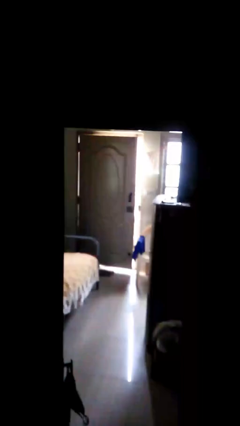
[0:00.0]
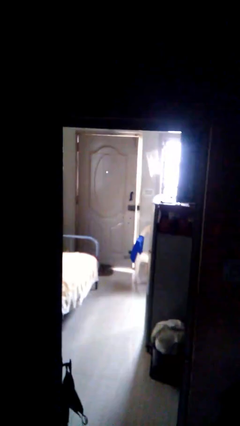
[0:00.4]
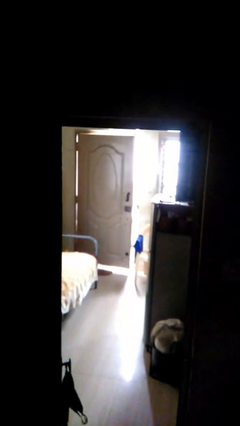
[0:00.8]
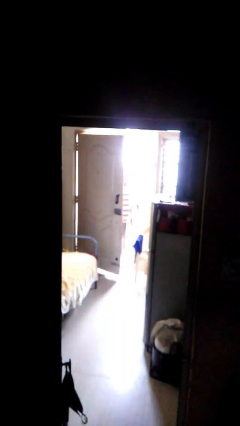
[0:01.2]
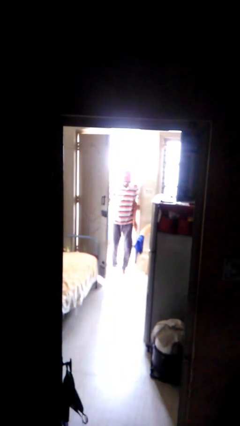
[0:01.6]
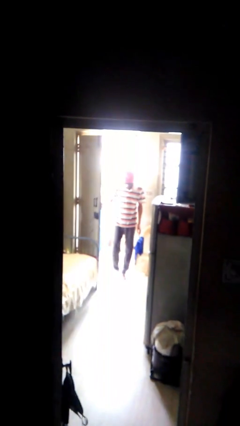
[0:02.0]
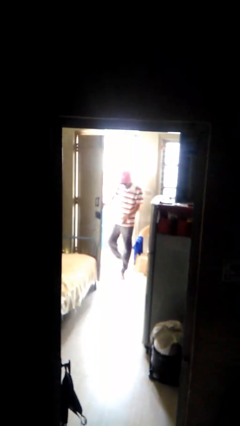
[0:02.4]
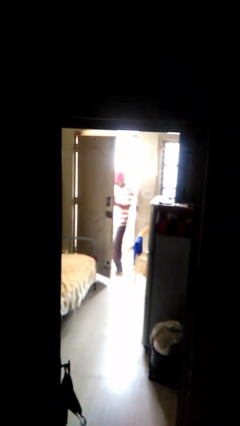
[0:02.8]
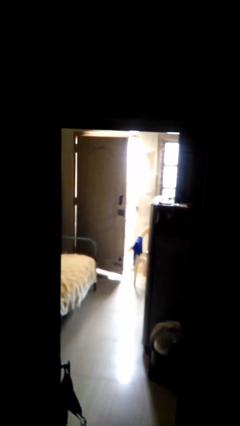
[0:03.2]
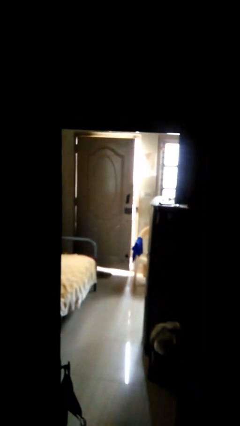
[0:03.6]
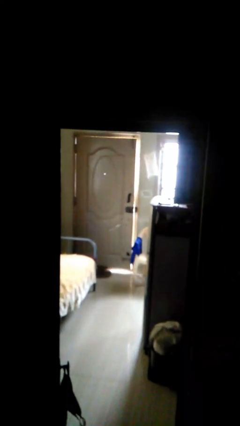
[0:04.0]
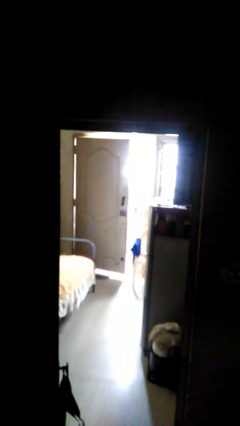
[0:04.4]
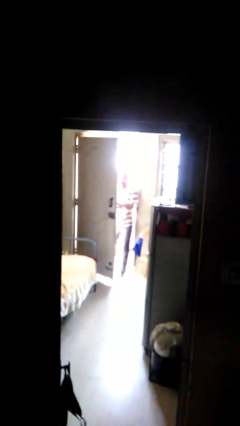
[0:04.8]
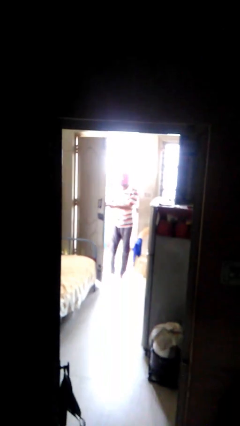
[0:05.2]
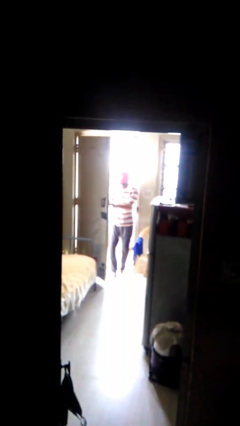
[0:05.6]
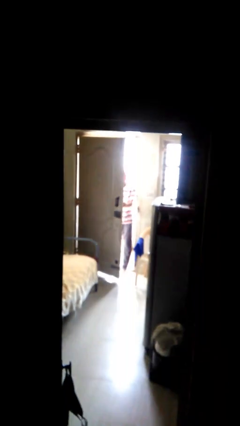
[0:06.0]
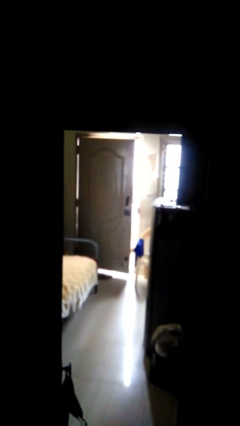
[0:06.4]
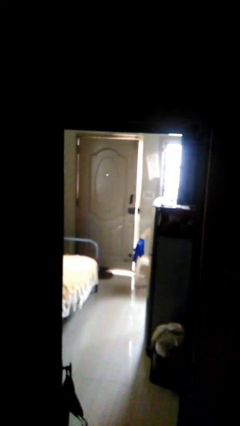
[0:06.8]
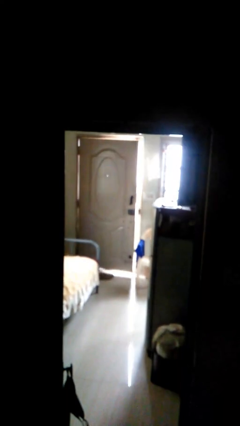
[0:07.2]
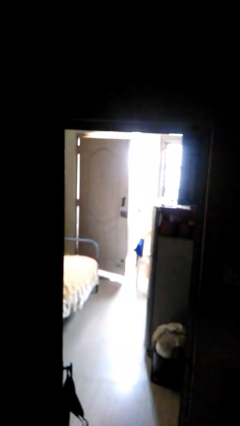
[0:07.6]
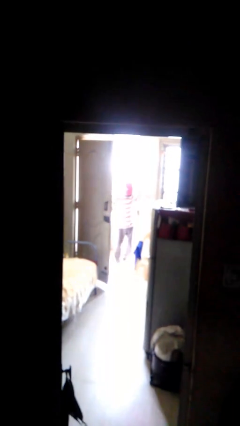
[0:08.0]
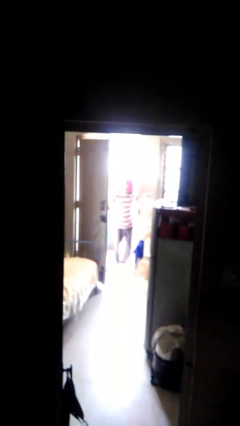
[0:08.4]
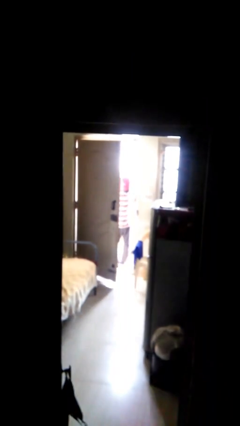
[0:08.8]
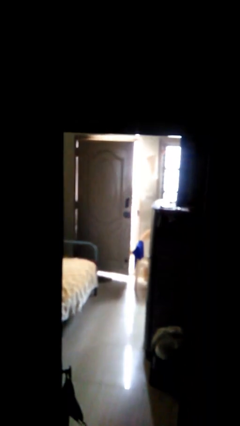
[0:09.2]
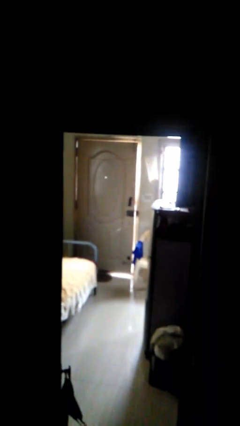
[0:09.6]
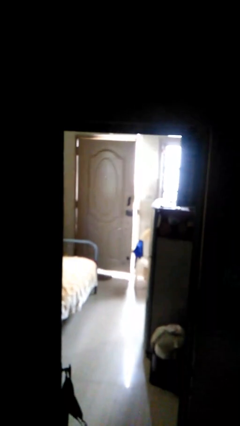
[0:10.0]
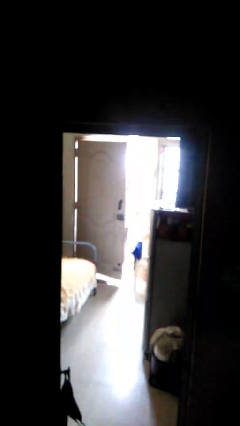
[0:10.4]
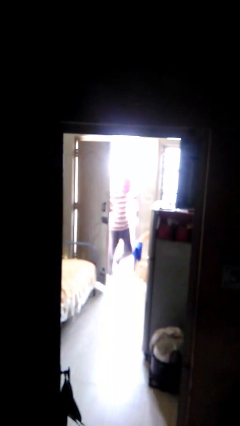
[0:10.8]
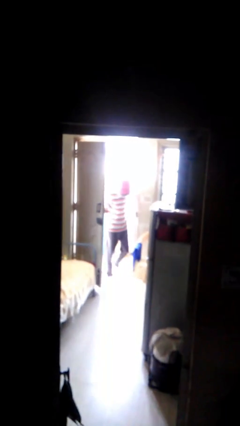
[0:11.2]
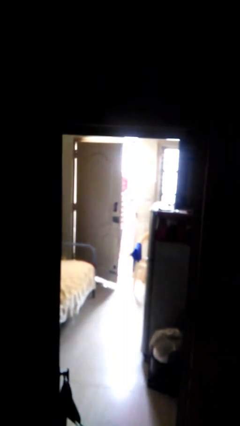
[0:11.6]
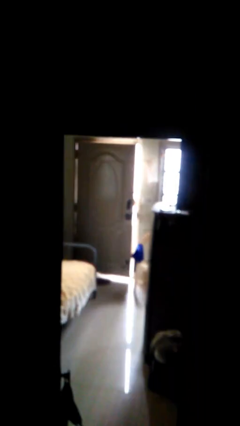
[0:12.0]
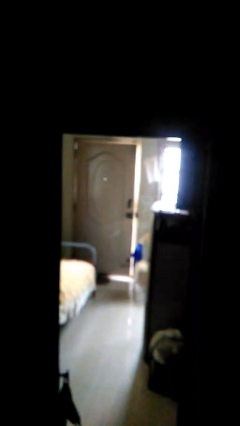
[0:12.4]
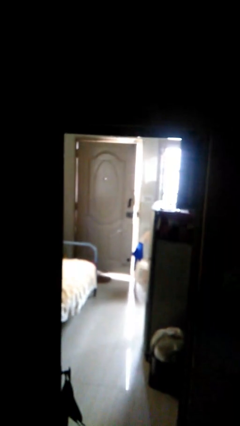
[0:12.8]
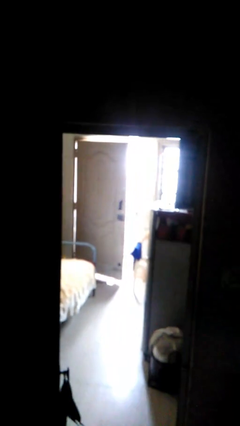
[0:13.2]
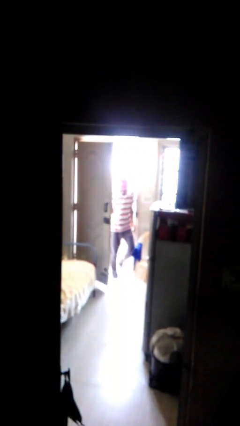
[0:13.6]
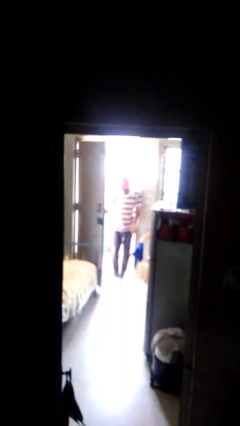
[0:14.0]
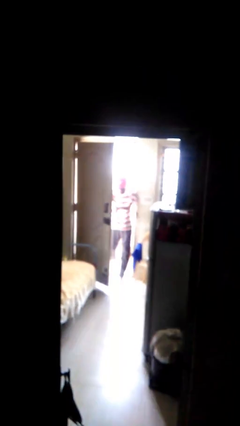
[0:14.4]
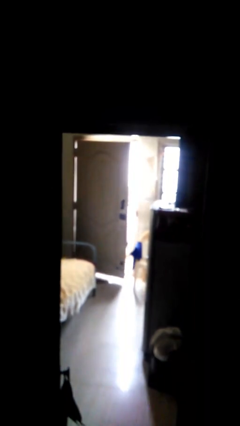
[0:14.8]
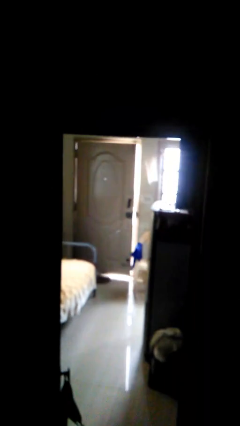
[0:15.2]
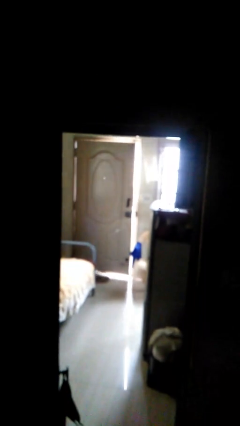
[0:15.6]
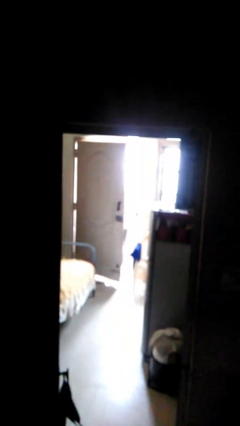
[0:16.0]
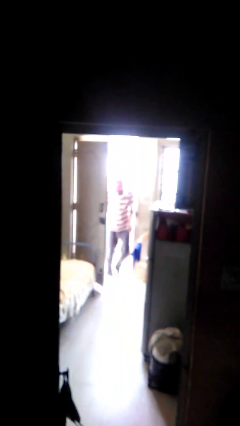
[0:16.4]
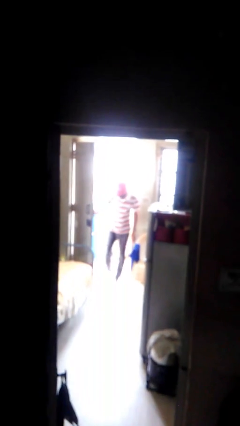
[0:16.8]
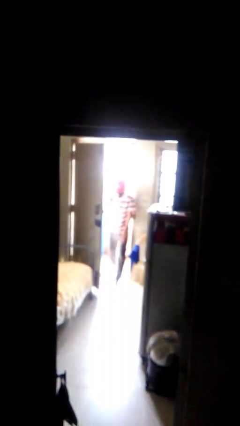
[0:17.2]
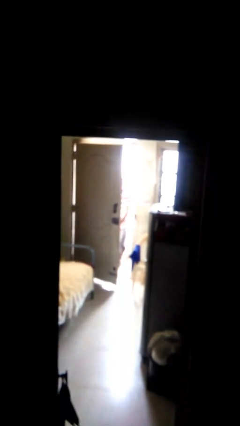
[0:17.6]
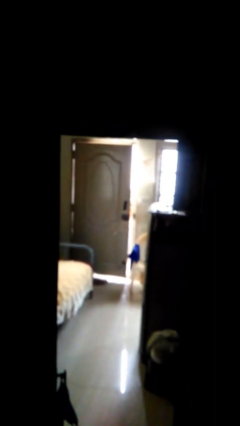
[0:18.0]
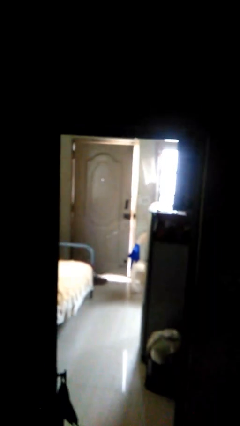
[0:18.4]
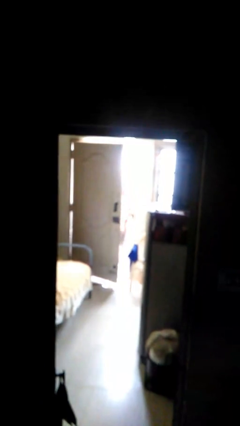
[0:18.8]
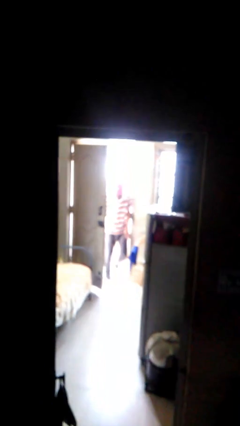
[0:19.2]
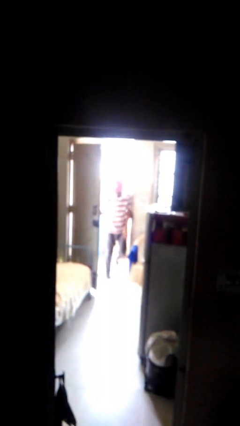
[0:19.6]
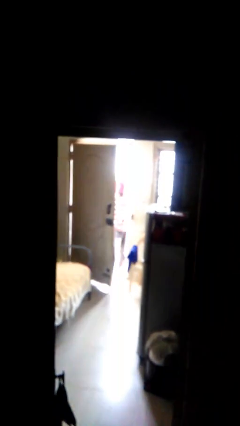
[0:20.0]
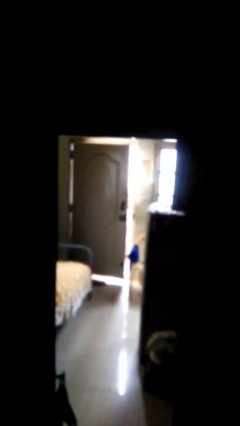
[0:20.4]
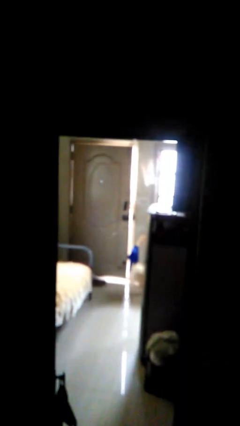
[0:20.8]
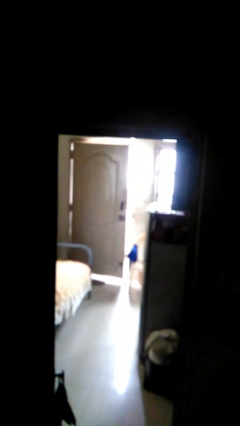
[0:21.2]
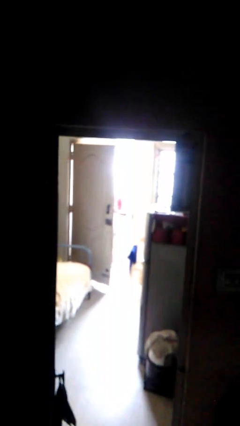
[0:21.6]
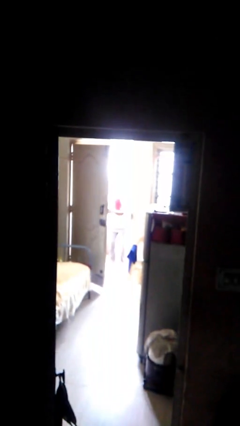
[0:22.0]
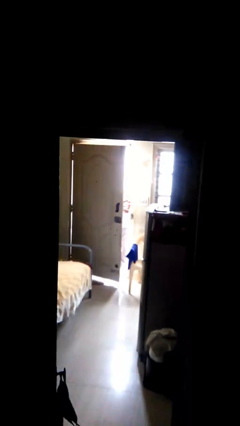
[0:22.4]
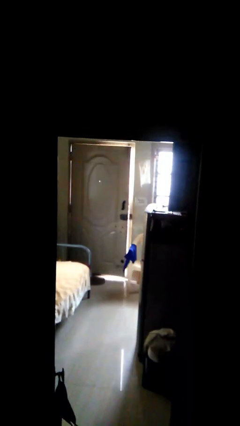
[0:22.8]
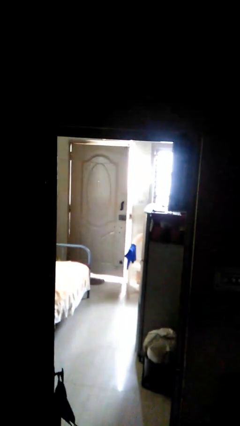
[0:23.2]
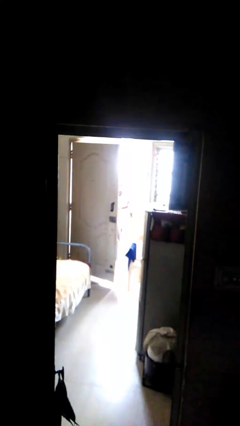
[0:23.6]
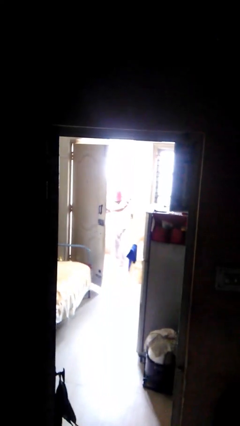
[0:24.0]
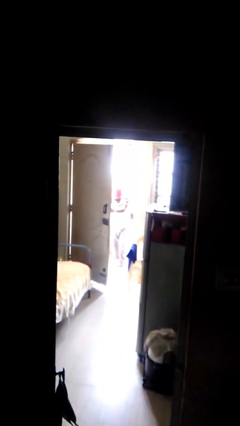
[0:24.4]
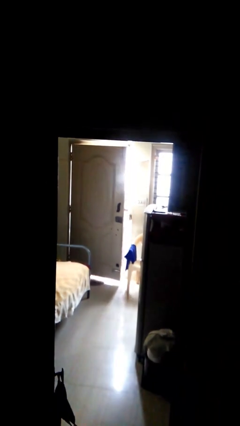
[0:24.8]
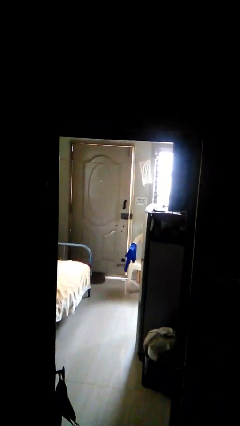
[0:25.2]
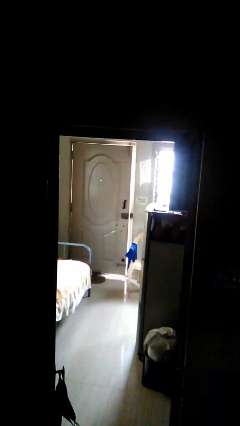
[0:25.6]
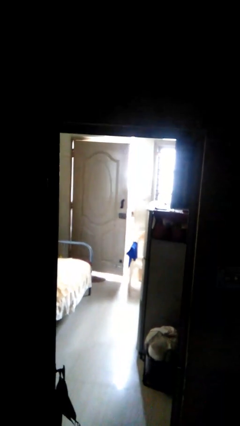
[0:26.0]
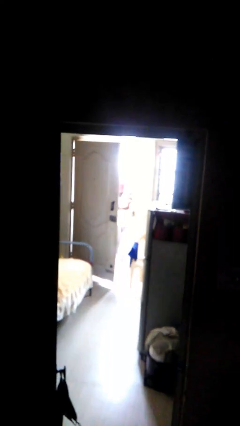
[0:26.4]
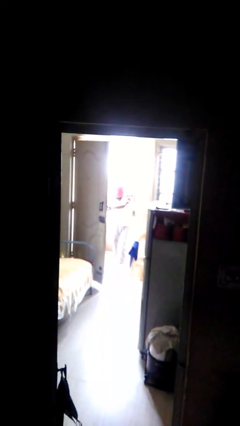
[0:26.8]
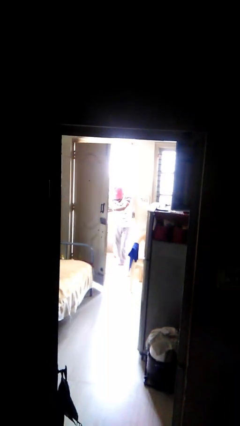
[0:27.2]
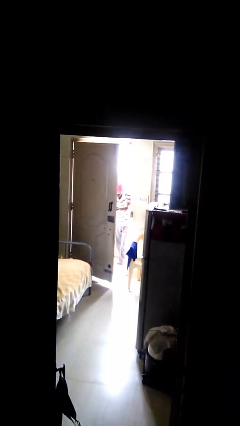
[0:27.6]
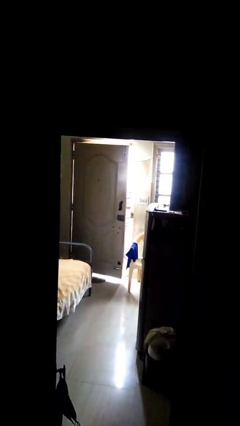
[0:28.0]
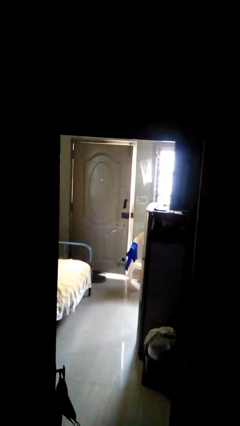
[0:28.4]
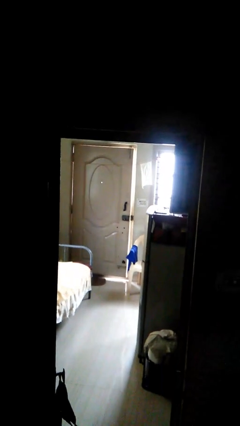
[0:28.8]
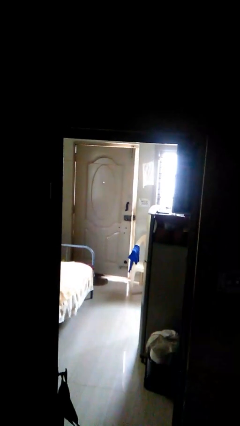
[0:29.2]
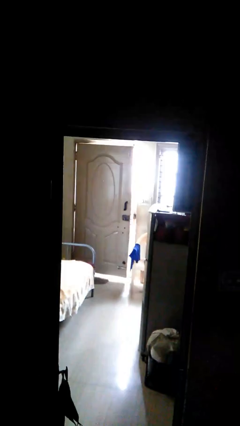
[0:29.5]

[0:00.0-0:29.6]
person closes facility door

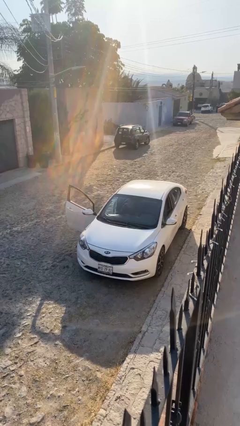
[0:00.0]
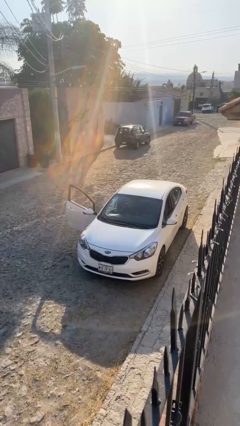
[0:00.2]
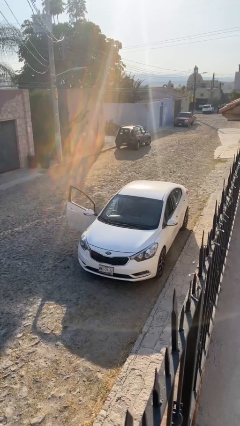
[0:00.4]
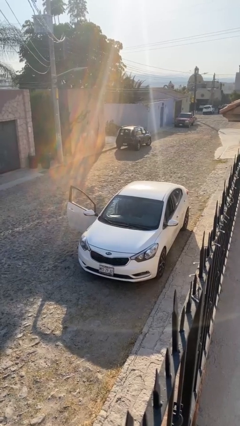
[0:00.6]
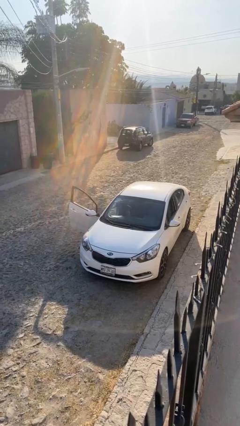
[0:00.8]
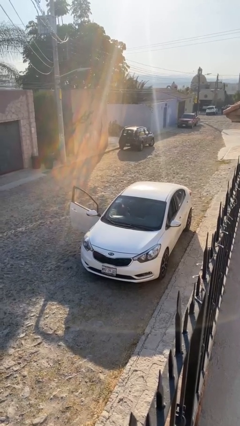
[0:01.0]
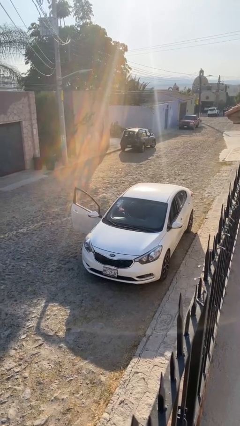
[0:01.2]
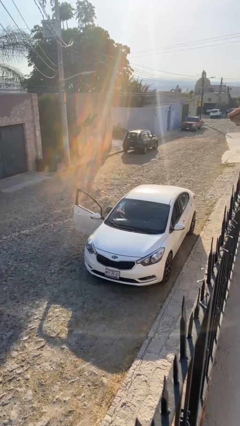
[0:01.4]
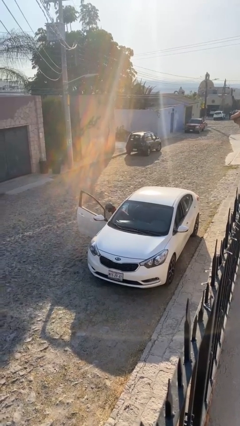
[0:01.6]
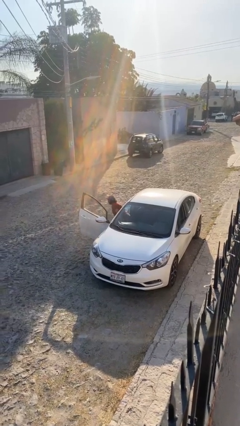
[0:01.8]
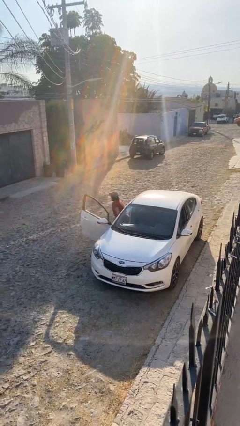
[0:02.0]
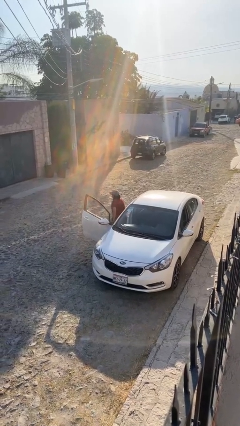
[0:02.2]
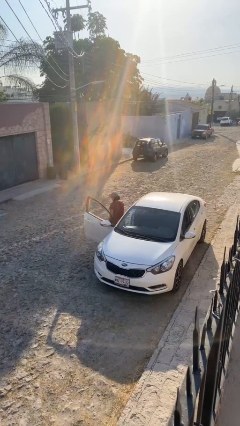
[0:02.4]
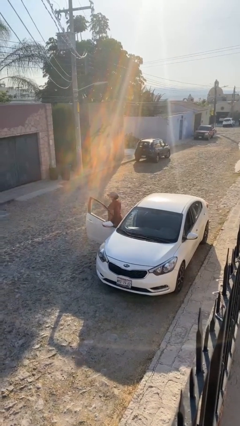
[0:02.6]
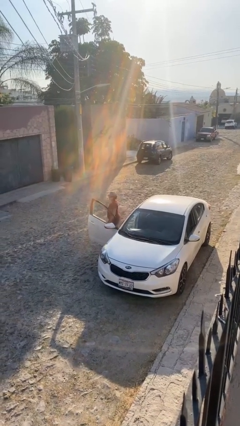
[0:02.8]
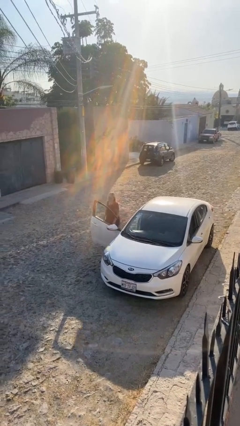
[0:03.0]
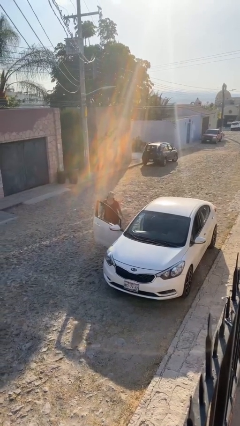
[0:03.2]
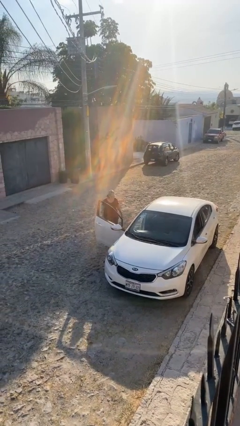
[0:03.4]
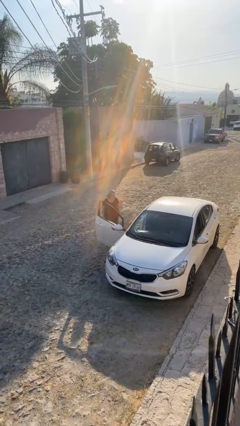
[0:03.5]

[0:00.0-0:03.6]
person exits car

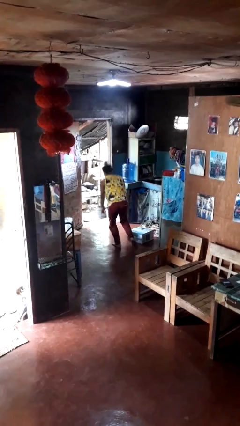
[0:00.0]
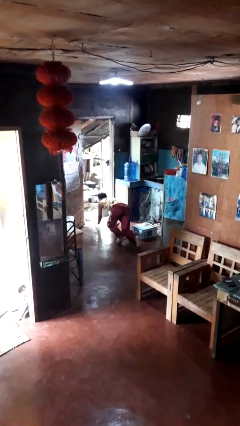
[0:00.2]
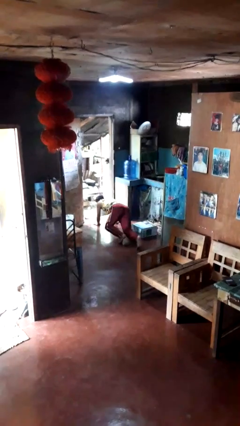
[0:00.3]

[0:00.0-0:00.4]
person trips on object on floor
